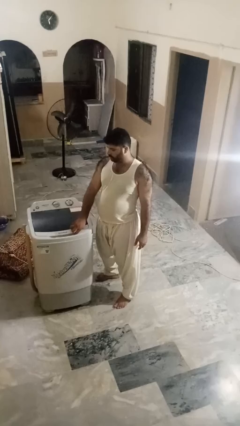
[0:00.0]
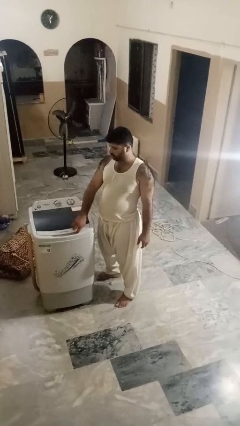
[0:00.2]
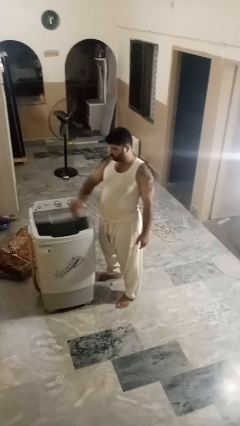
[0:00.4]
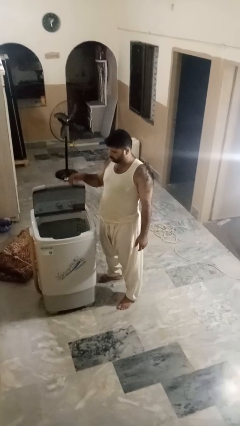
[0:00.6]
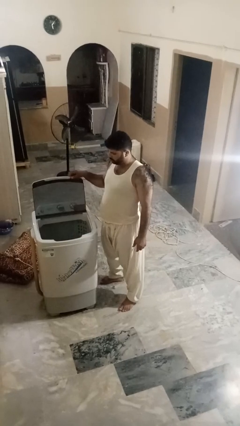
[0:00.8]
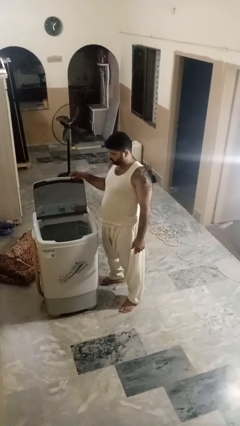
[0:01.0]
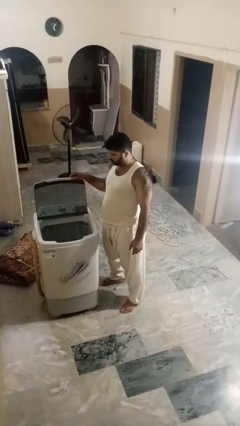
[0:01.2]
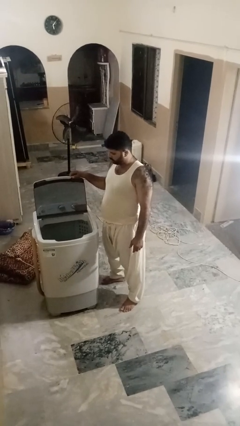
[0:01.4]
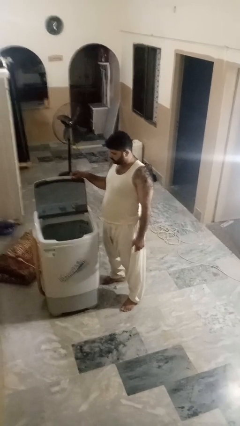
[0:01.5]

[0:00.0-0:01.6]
person opens clothes washer

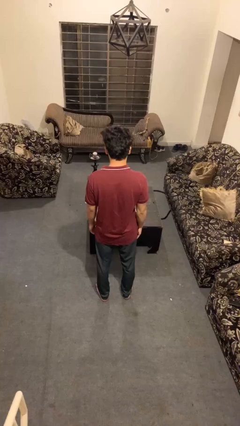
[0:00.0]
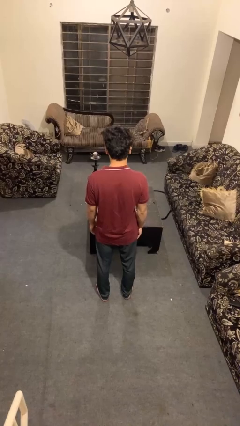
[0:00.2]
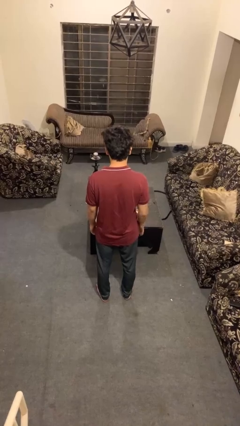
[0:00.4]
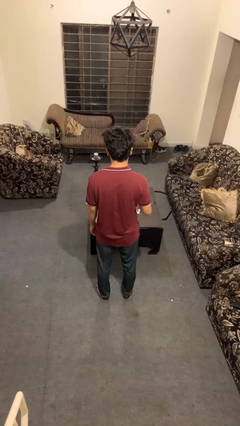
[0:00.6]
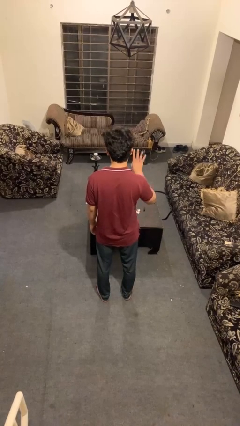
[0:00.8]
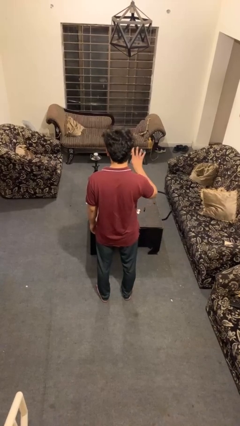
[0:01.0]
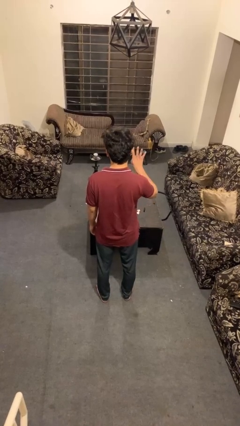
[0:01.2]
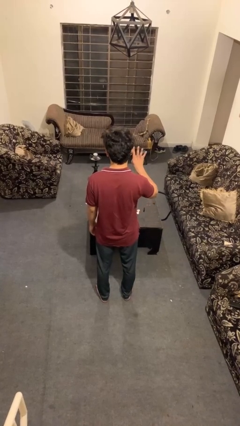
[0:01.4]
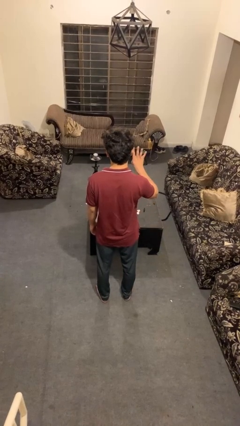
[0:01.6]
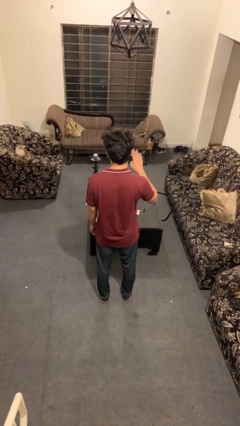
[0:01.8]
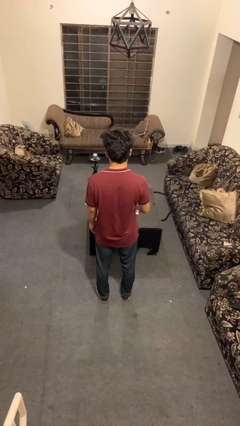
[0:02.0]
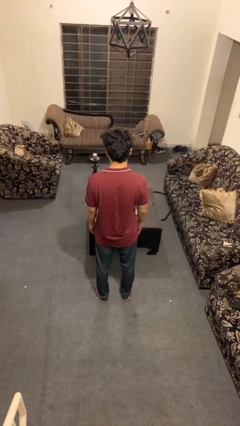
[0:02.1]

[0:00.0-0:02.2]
person gestures number four

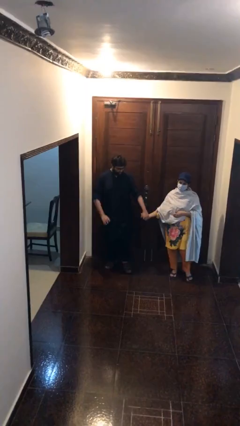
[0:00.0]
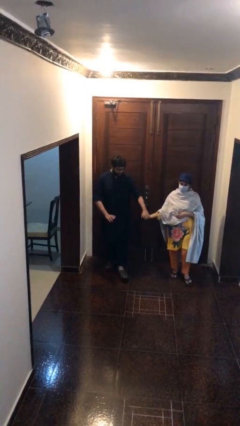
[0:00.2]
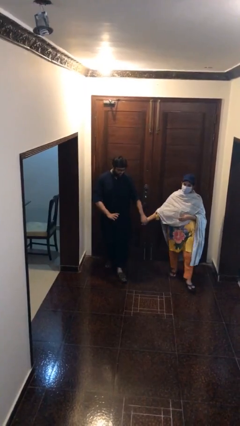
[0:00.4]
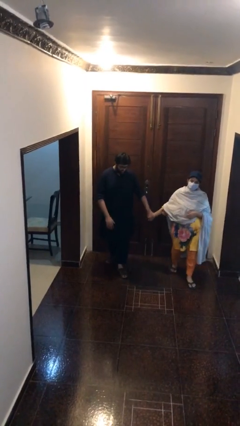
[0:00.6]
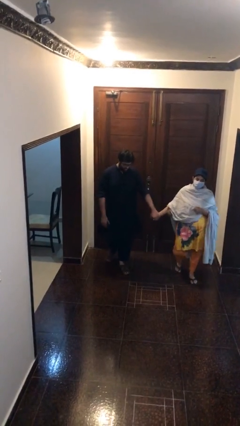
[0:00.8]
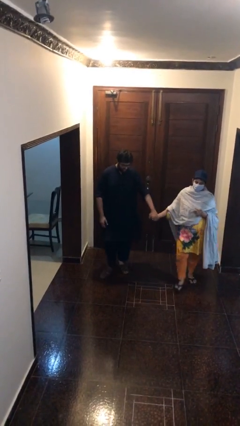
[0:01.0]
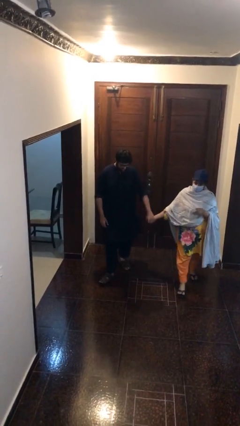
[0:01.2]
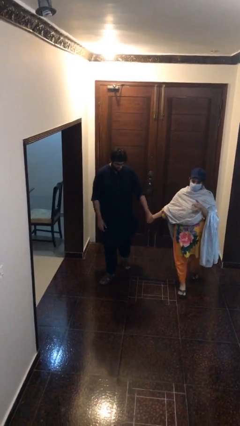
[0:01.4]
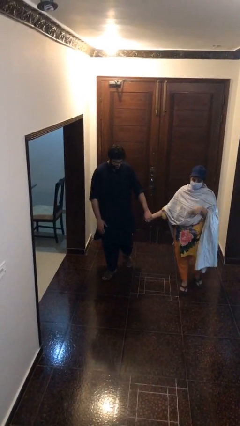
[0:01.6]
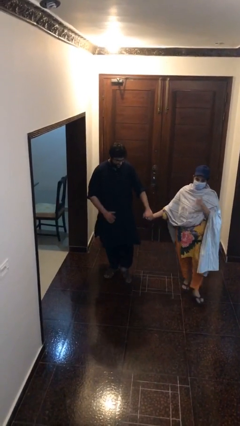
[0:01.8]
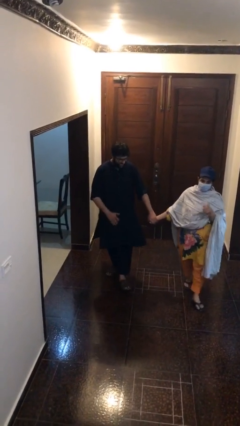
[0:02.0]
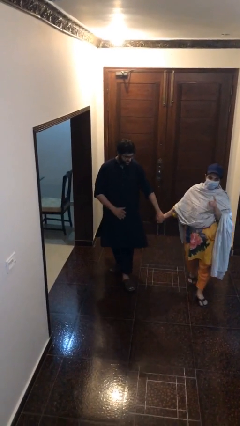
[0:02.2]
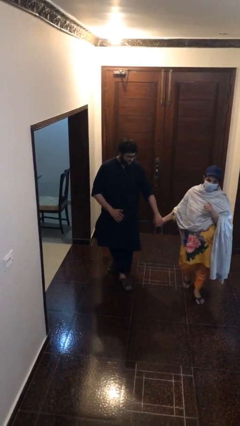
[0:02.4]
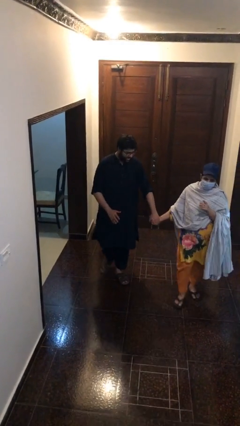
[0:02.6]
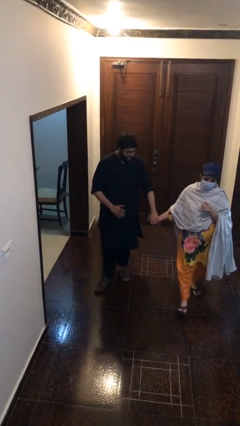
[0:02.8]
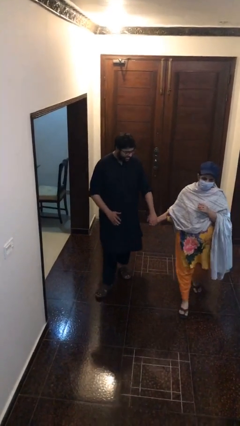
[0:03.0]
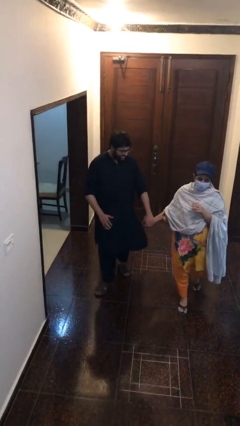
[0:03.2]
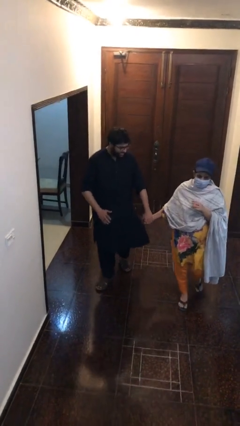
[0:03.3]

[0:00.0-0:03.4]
person holds hand

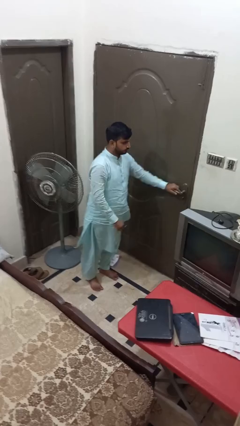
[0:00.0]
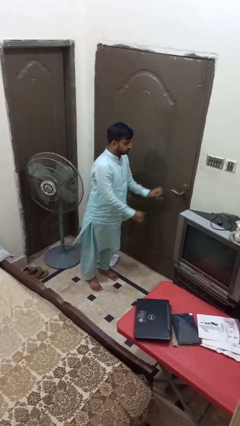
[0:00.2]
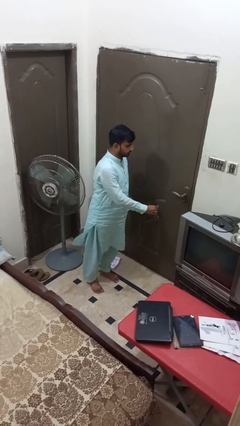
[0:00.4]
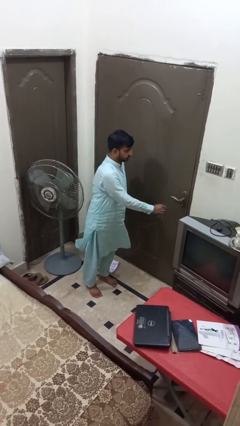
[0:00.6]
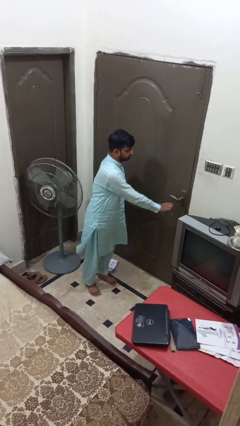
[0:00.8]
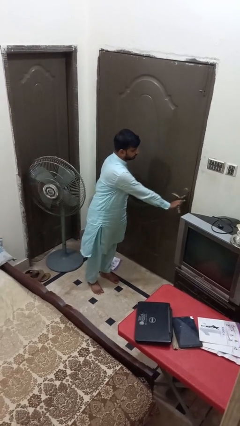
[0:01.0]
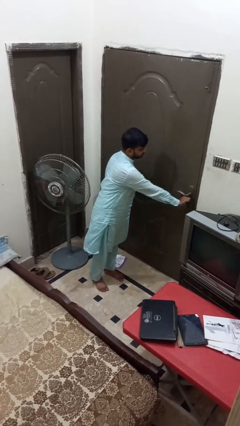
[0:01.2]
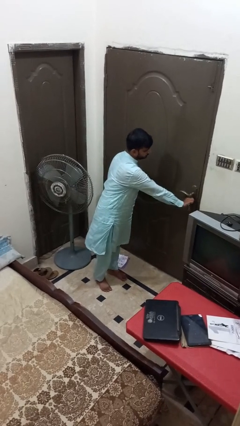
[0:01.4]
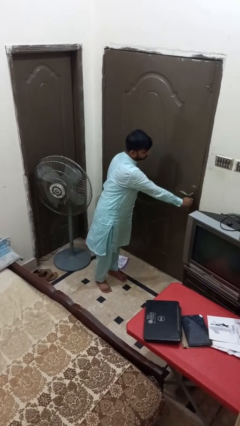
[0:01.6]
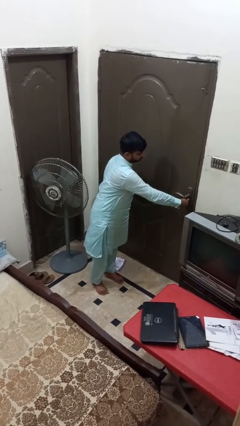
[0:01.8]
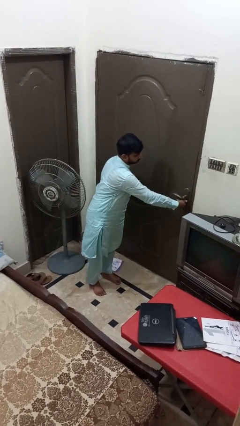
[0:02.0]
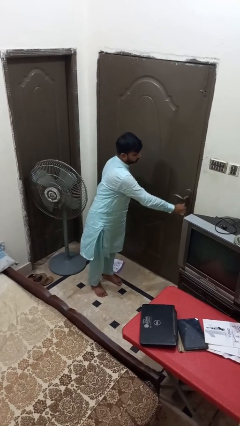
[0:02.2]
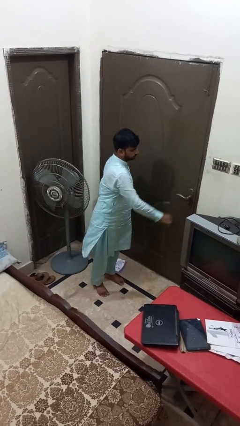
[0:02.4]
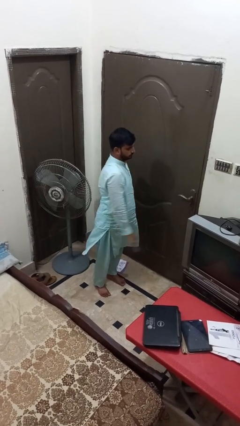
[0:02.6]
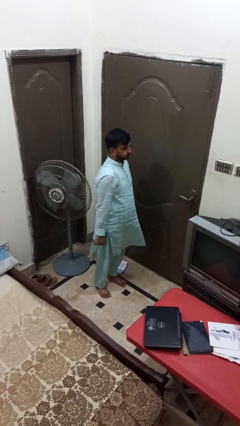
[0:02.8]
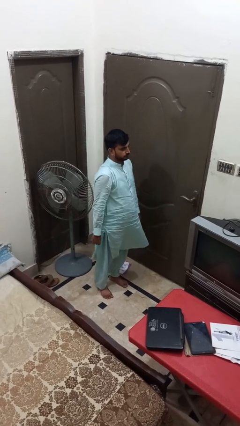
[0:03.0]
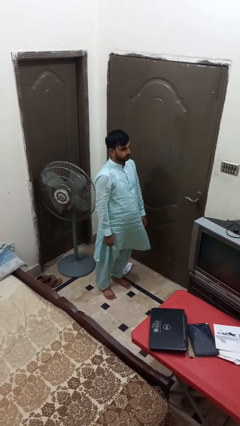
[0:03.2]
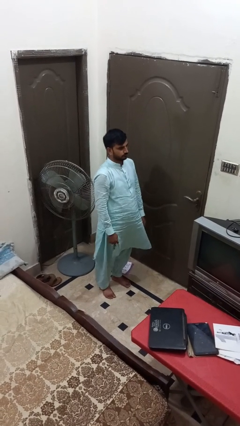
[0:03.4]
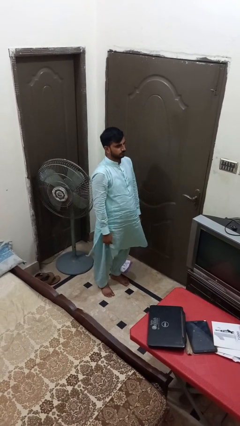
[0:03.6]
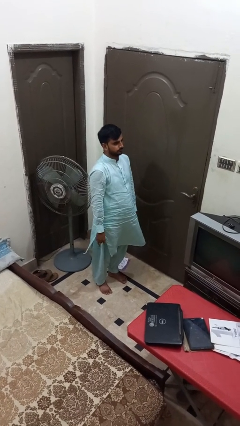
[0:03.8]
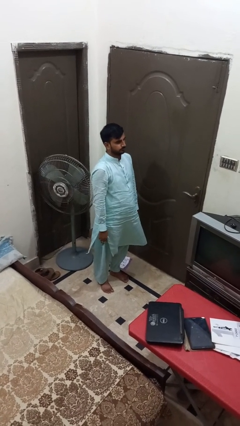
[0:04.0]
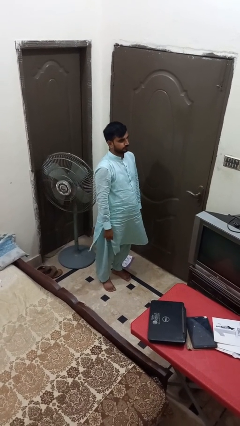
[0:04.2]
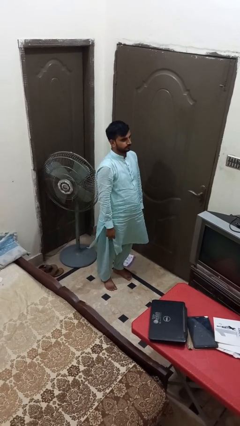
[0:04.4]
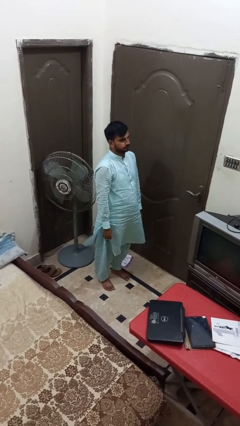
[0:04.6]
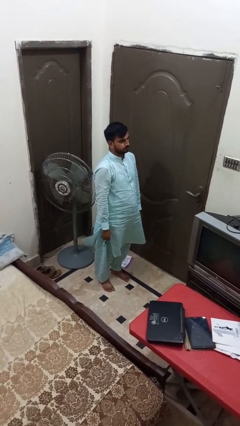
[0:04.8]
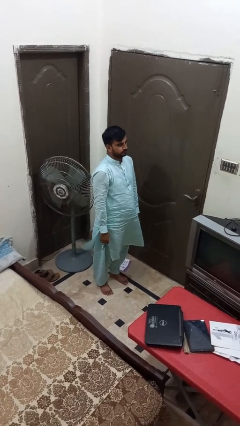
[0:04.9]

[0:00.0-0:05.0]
person locks door with keys

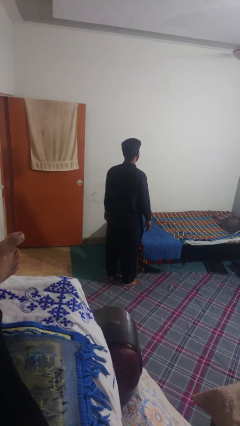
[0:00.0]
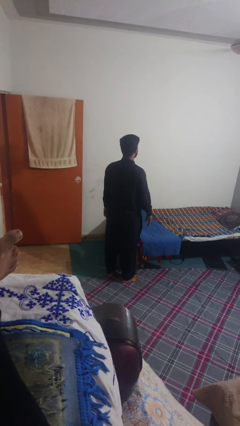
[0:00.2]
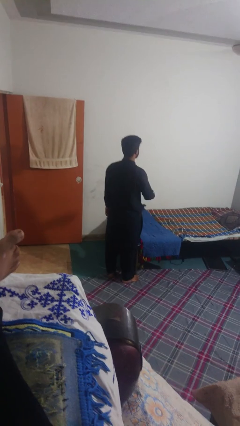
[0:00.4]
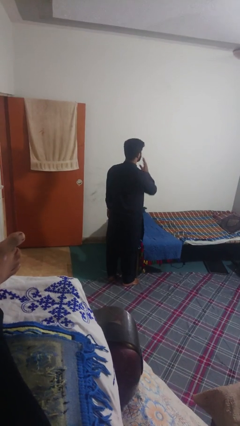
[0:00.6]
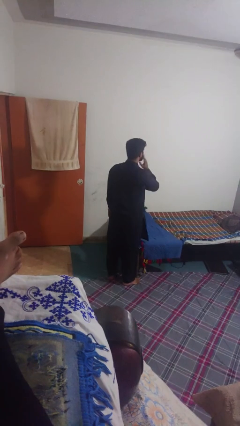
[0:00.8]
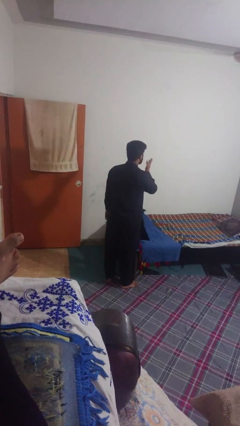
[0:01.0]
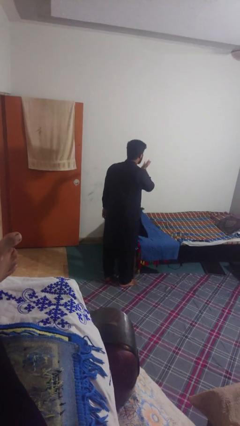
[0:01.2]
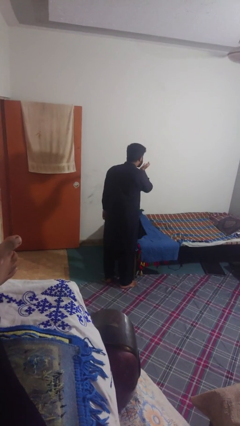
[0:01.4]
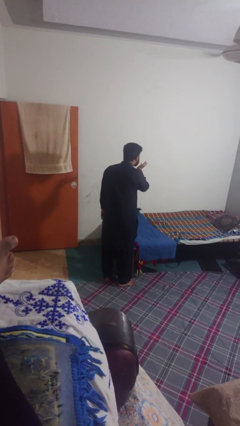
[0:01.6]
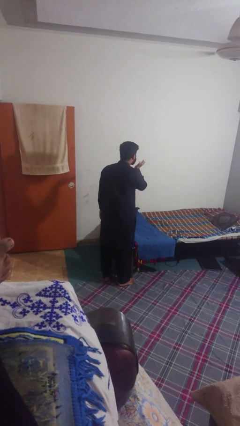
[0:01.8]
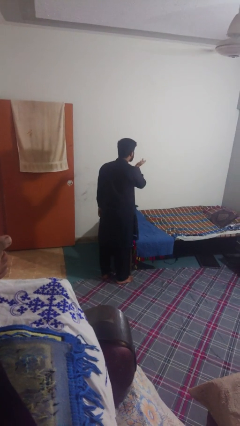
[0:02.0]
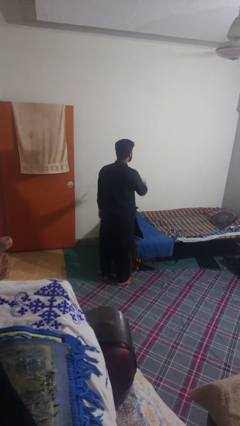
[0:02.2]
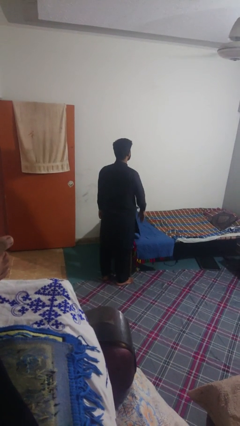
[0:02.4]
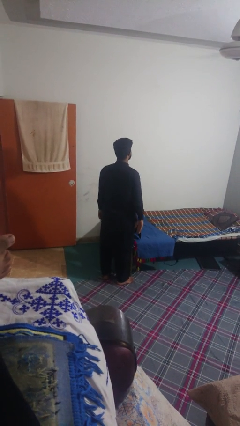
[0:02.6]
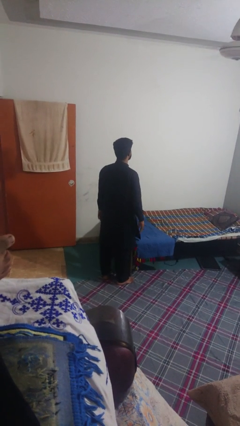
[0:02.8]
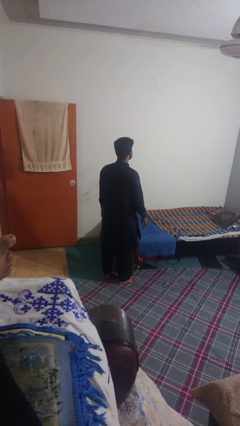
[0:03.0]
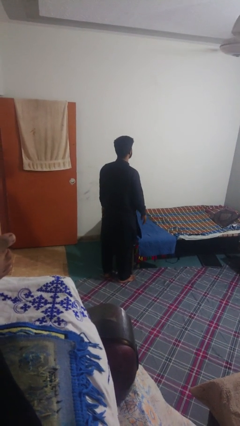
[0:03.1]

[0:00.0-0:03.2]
person gestures blow kiss

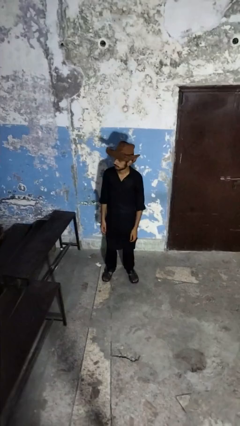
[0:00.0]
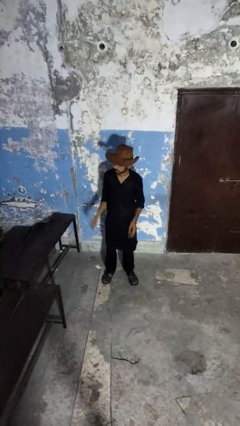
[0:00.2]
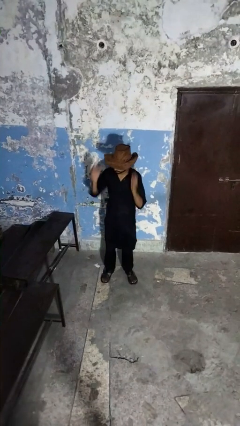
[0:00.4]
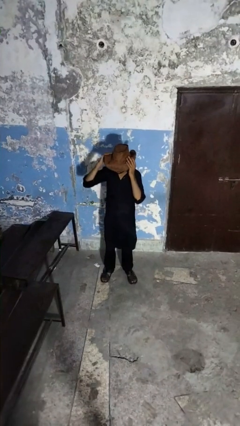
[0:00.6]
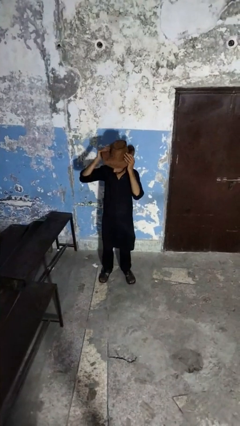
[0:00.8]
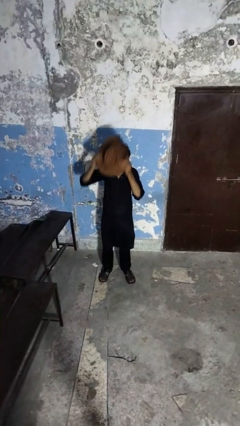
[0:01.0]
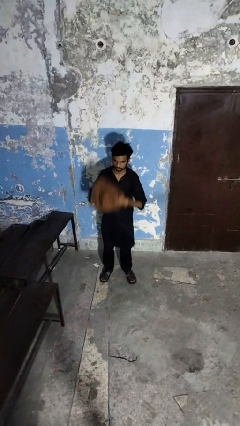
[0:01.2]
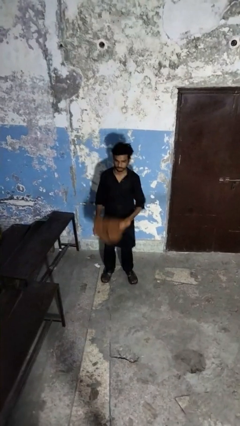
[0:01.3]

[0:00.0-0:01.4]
person takes off hat

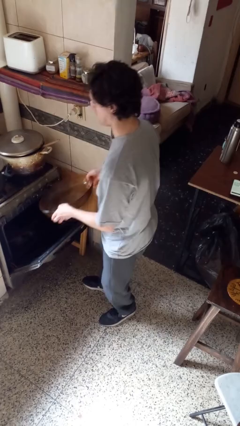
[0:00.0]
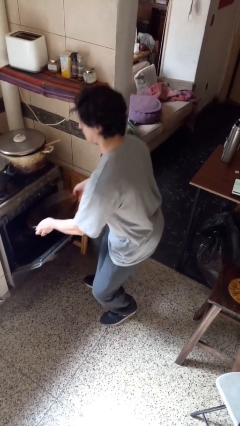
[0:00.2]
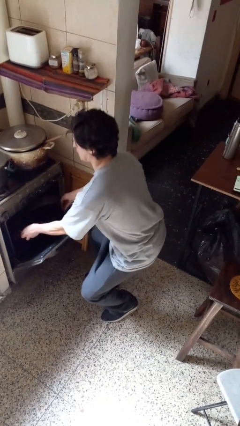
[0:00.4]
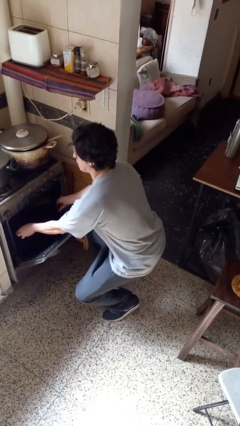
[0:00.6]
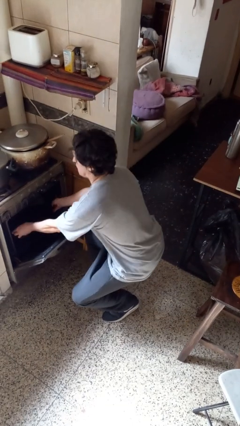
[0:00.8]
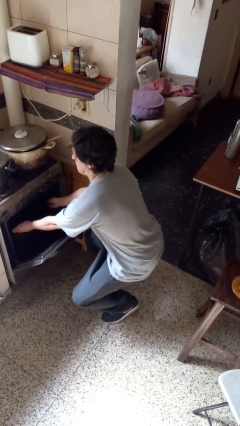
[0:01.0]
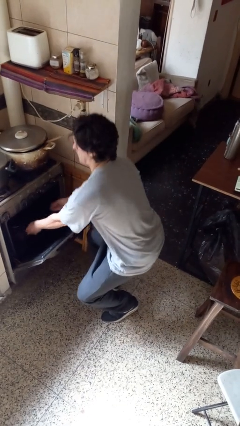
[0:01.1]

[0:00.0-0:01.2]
person puts object into oven
